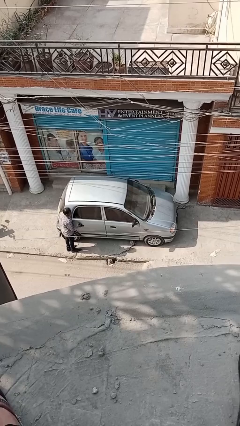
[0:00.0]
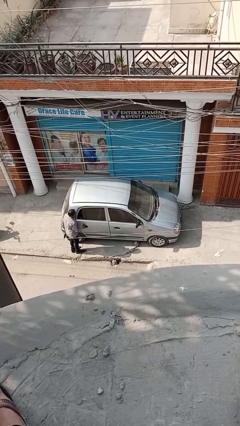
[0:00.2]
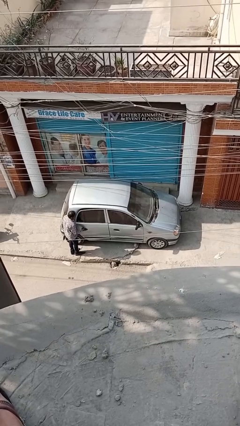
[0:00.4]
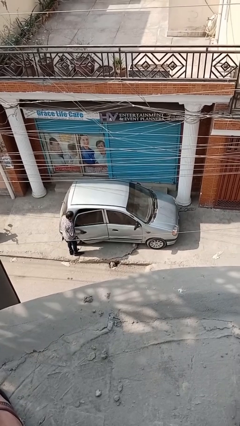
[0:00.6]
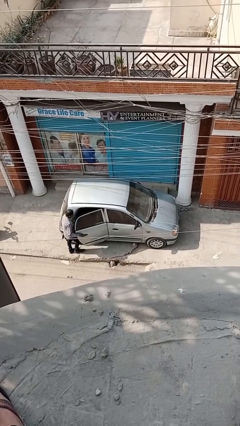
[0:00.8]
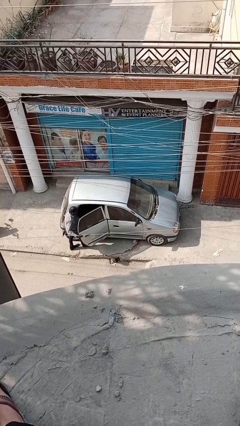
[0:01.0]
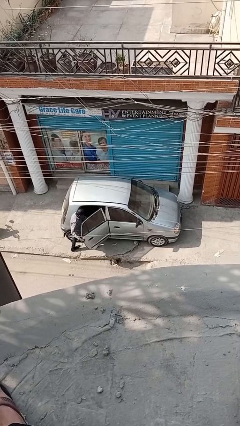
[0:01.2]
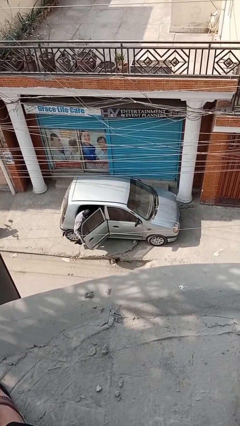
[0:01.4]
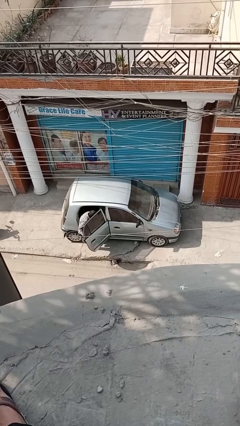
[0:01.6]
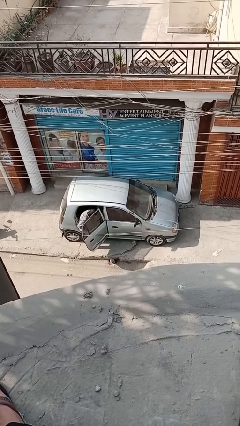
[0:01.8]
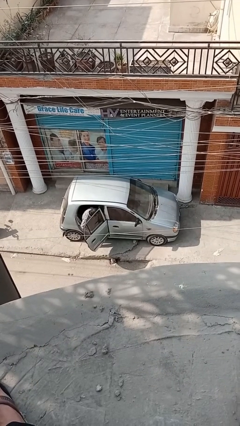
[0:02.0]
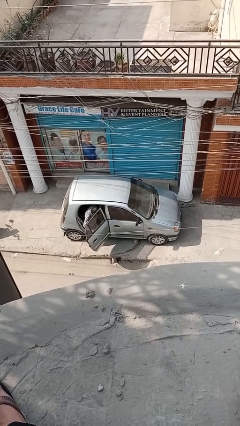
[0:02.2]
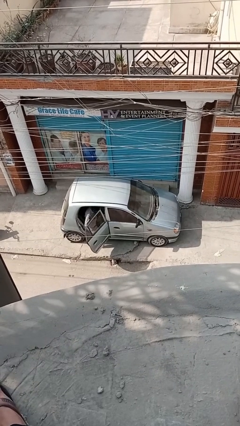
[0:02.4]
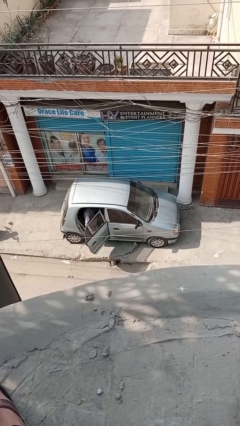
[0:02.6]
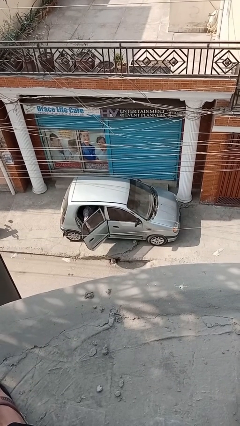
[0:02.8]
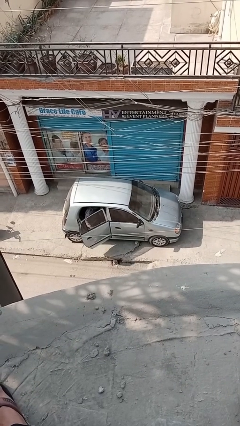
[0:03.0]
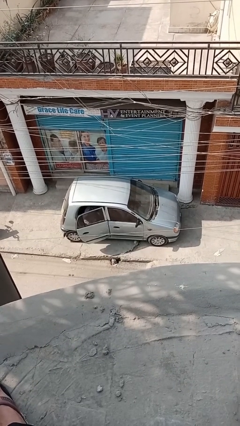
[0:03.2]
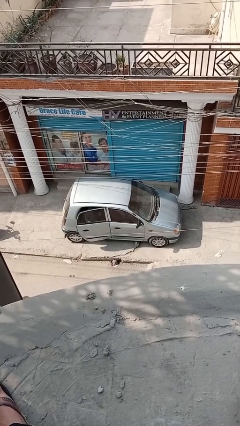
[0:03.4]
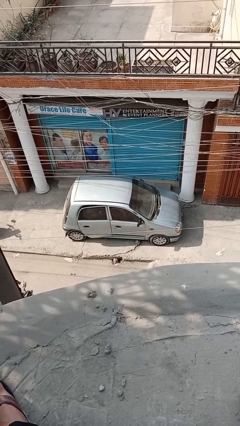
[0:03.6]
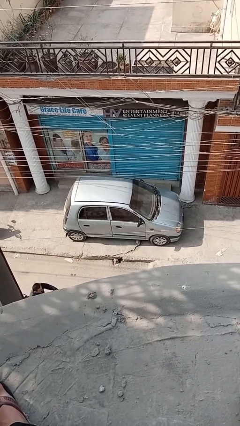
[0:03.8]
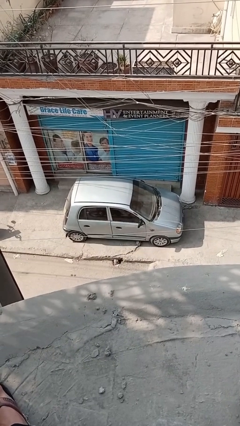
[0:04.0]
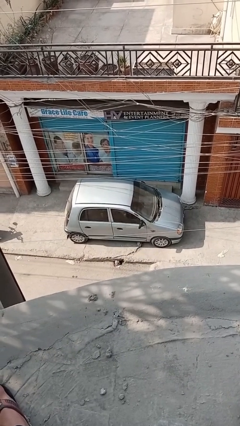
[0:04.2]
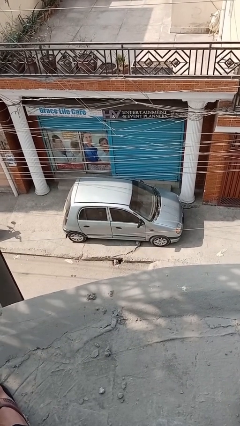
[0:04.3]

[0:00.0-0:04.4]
car picks up person

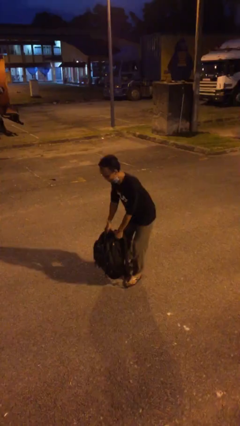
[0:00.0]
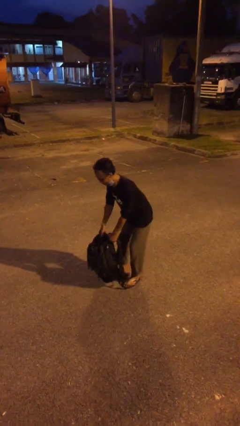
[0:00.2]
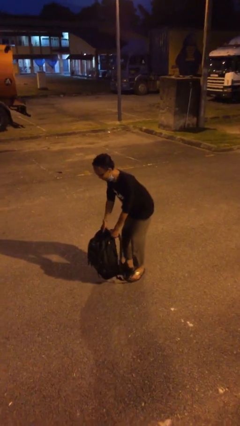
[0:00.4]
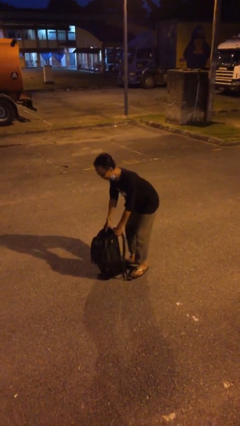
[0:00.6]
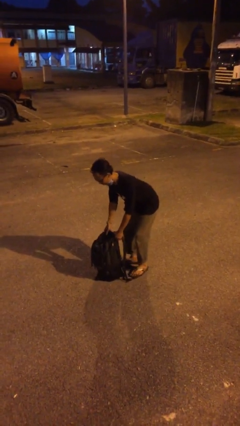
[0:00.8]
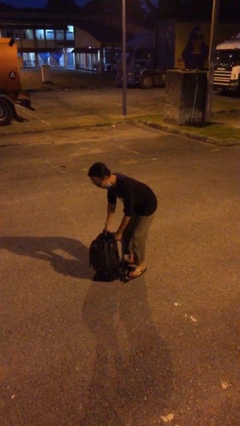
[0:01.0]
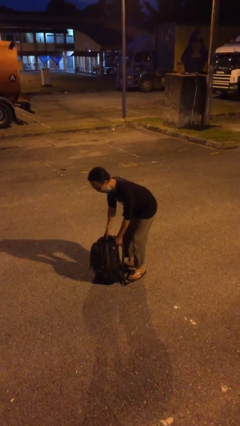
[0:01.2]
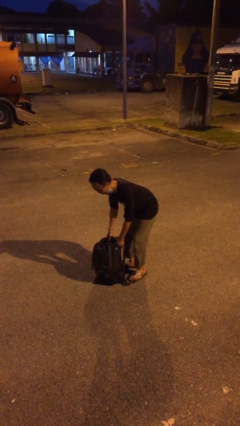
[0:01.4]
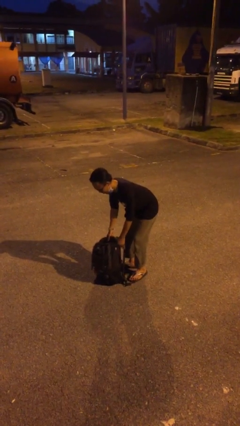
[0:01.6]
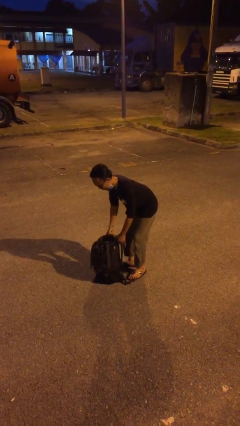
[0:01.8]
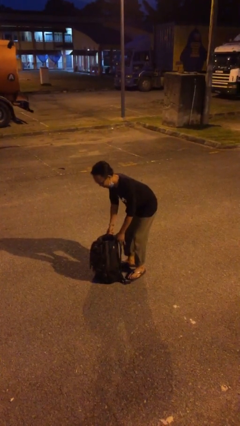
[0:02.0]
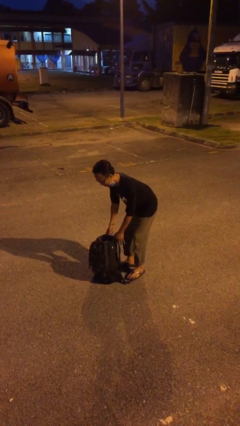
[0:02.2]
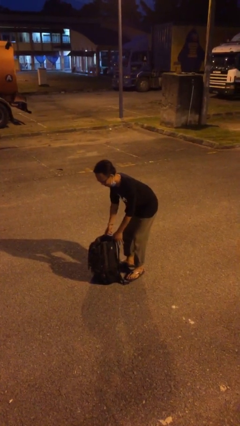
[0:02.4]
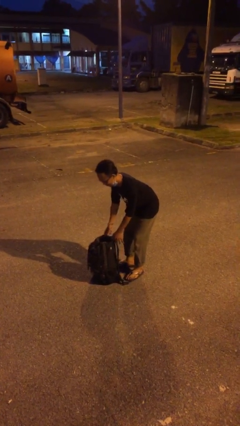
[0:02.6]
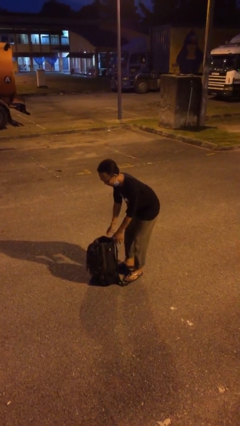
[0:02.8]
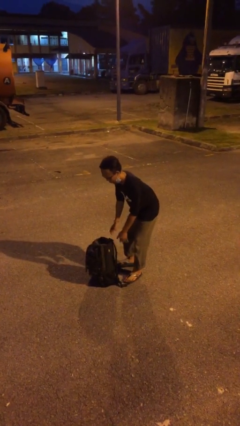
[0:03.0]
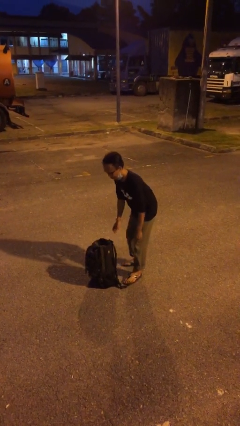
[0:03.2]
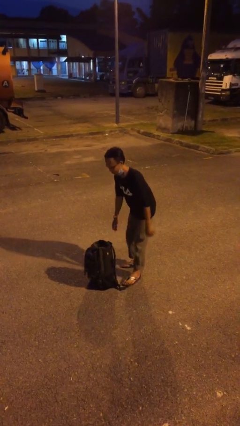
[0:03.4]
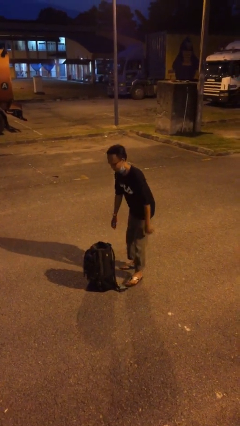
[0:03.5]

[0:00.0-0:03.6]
person puts down object on floor

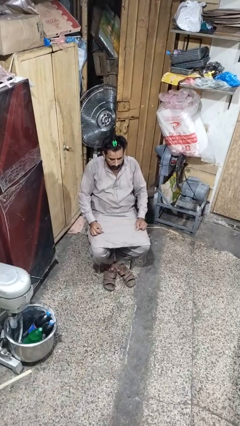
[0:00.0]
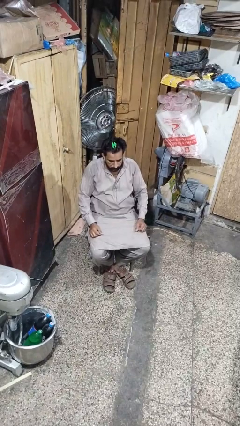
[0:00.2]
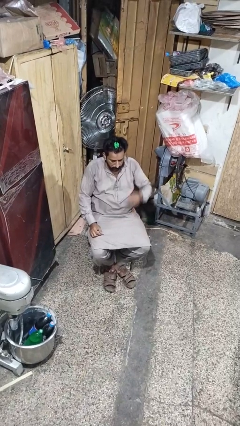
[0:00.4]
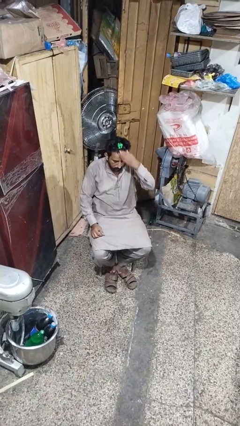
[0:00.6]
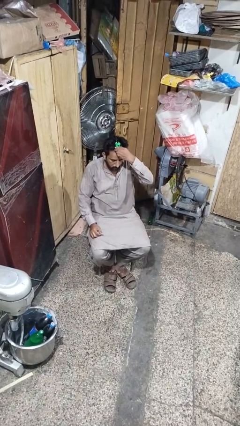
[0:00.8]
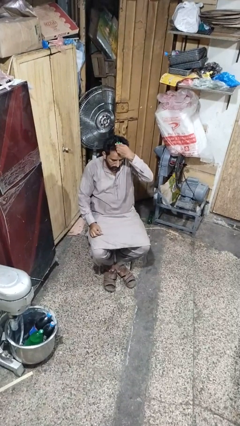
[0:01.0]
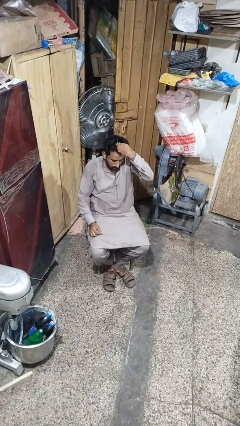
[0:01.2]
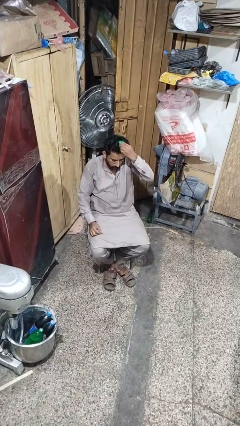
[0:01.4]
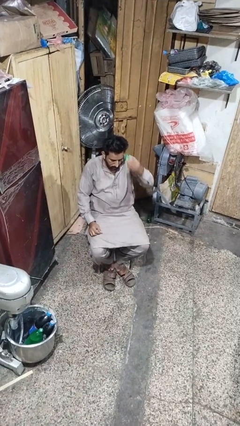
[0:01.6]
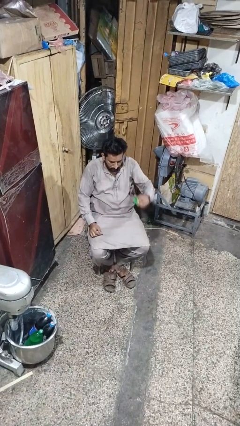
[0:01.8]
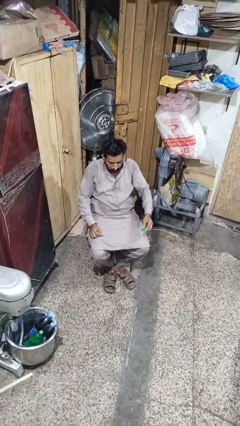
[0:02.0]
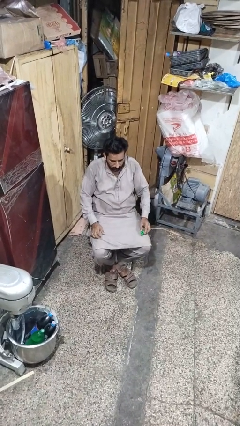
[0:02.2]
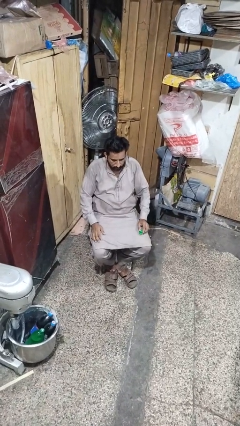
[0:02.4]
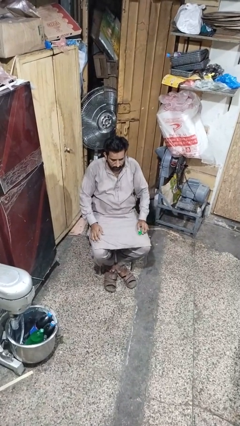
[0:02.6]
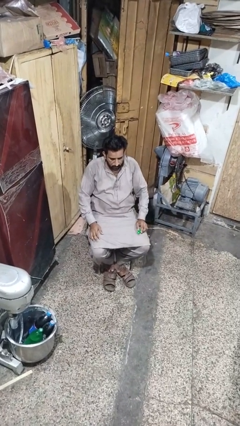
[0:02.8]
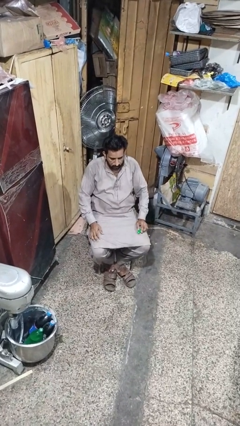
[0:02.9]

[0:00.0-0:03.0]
person takes off hairtie

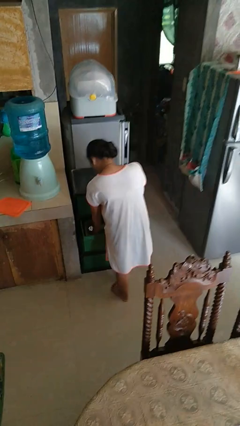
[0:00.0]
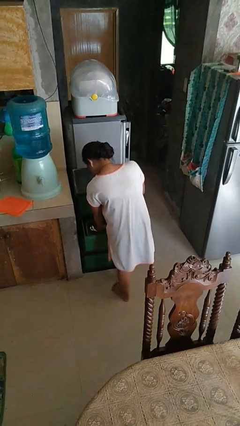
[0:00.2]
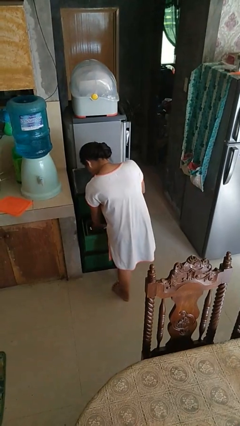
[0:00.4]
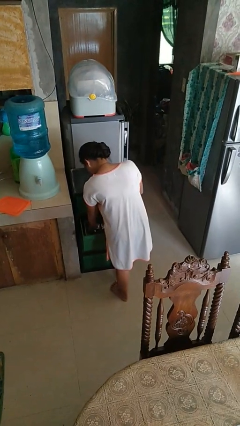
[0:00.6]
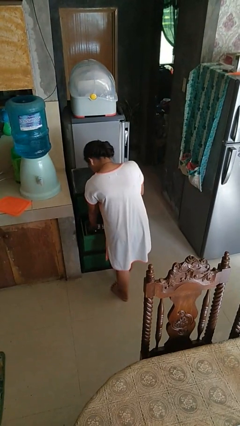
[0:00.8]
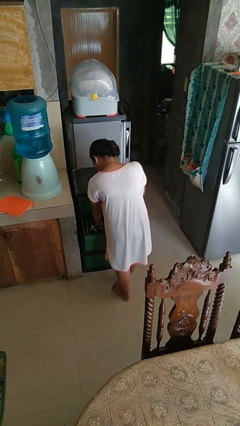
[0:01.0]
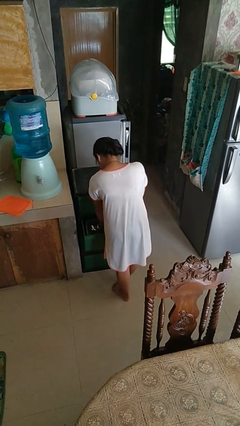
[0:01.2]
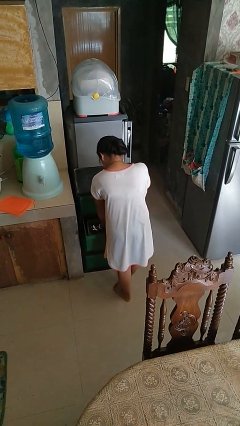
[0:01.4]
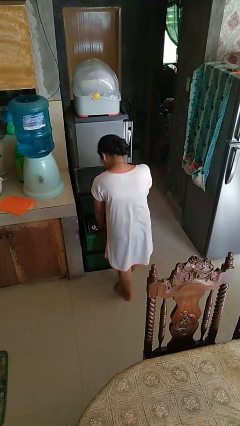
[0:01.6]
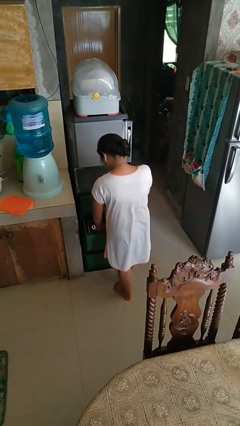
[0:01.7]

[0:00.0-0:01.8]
person searches in kitchen drawer

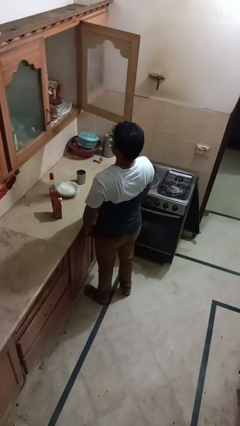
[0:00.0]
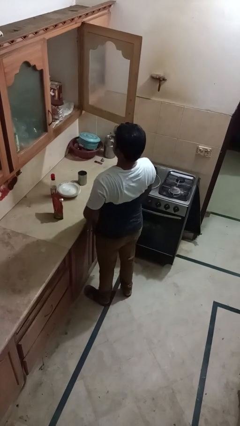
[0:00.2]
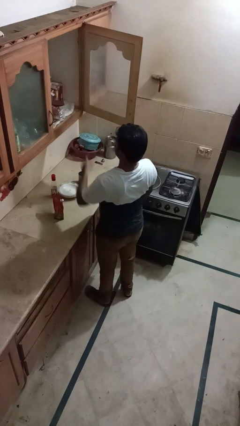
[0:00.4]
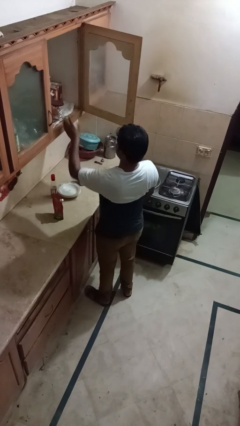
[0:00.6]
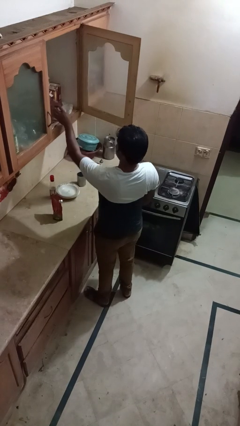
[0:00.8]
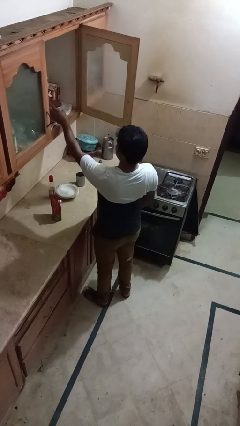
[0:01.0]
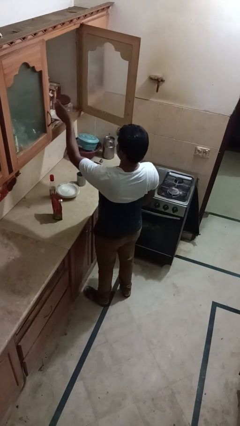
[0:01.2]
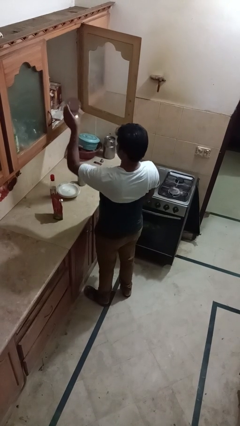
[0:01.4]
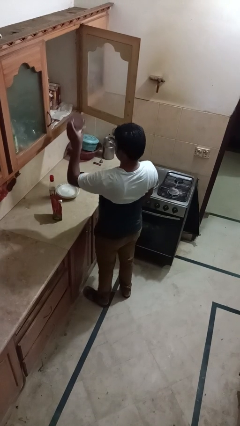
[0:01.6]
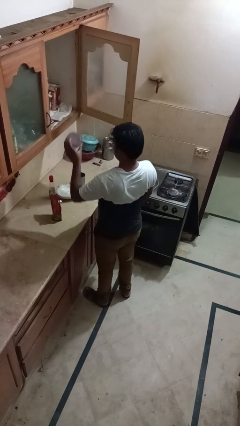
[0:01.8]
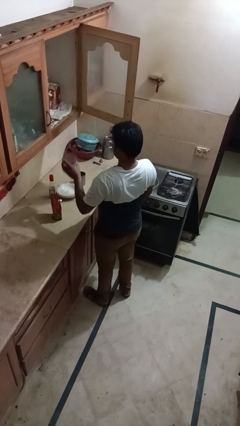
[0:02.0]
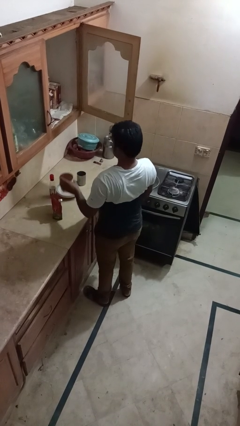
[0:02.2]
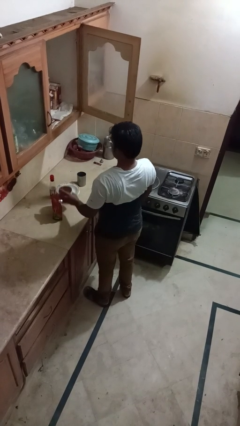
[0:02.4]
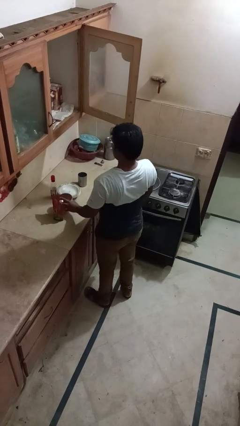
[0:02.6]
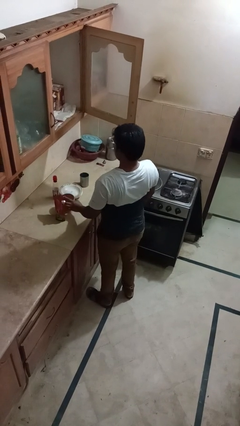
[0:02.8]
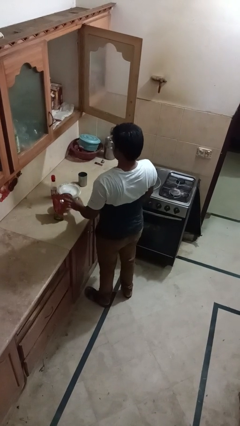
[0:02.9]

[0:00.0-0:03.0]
person takes object from cabinet

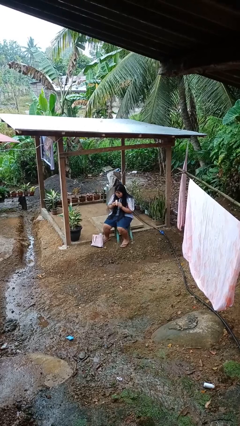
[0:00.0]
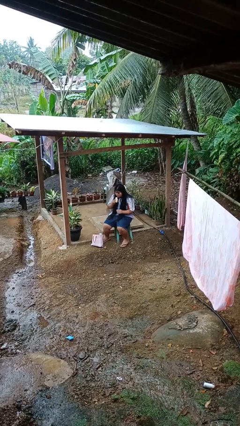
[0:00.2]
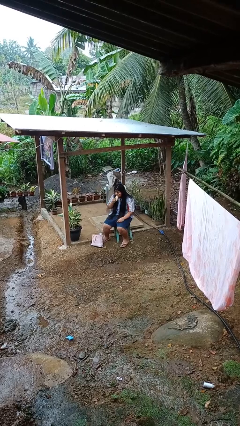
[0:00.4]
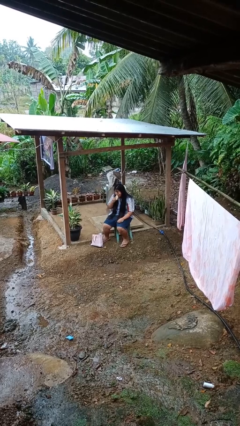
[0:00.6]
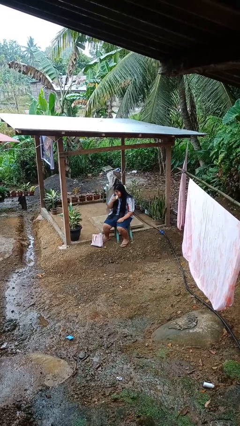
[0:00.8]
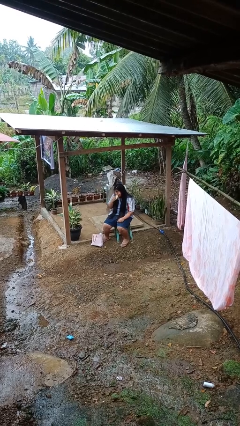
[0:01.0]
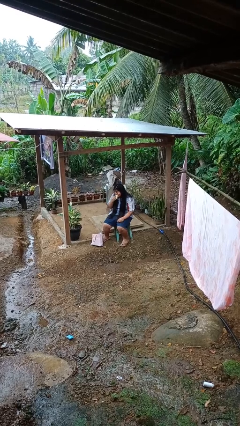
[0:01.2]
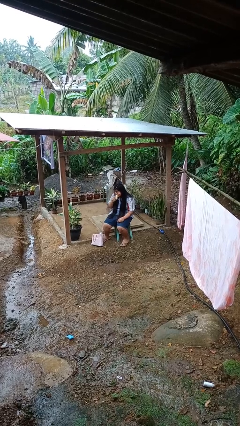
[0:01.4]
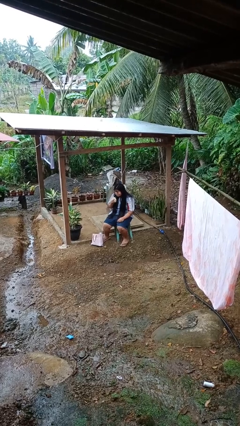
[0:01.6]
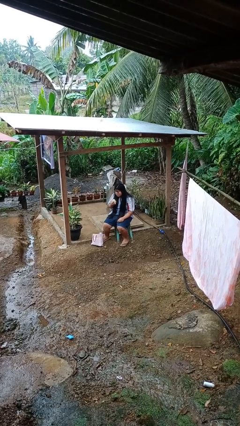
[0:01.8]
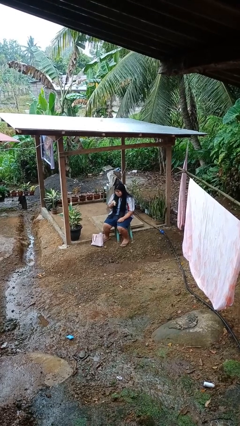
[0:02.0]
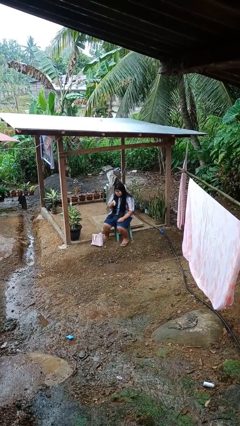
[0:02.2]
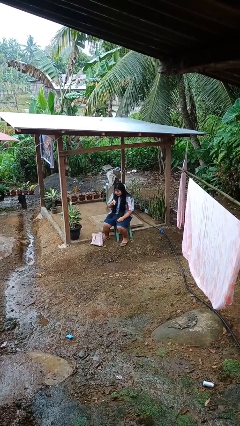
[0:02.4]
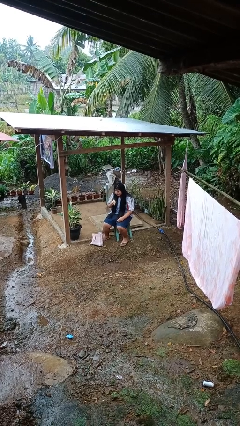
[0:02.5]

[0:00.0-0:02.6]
person eats banana
